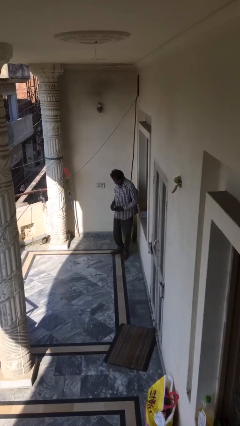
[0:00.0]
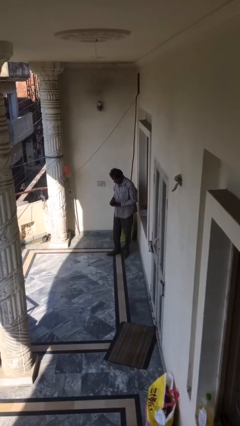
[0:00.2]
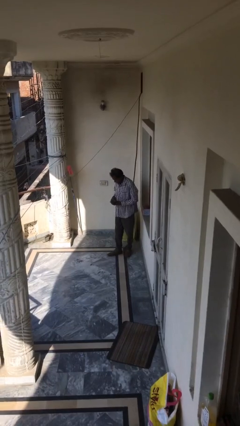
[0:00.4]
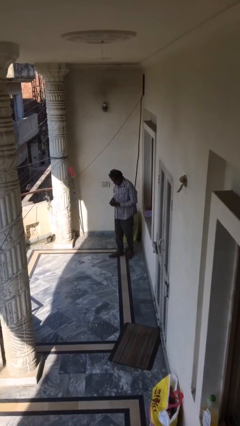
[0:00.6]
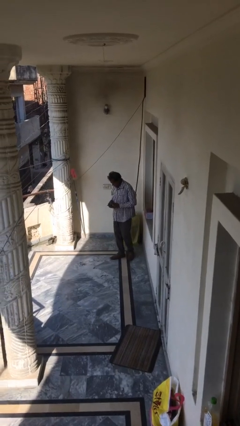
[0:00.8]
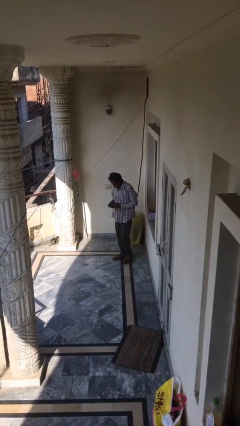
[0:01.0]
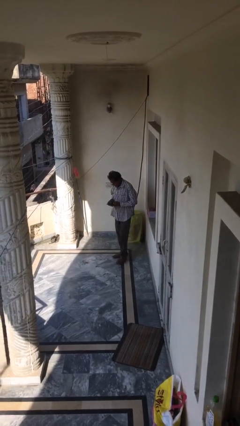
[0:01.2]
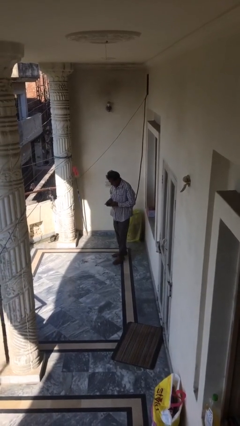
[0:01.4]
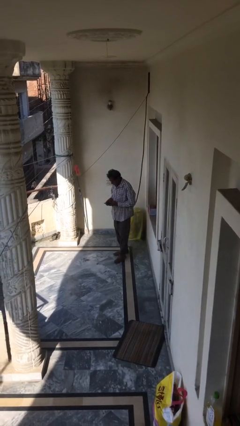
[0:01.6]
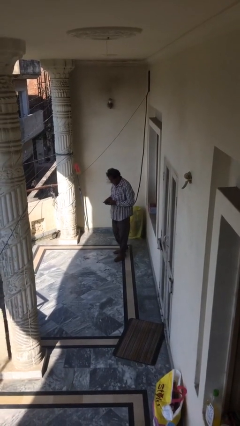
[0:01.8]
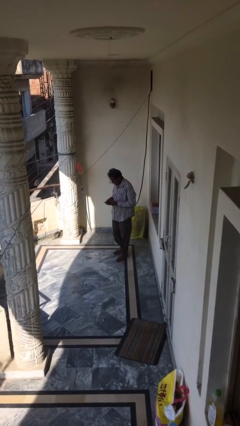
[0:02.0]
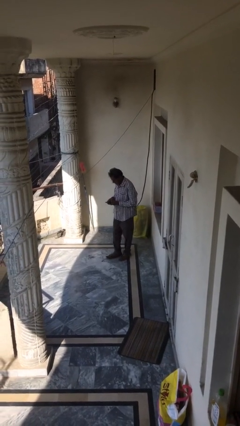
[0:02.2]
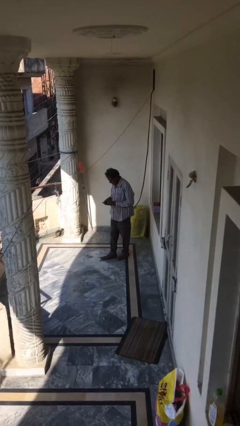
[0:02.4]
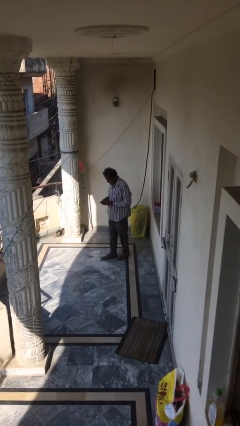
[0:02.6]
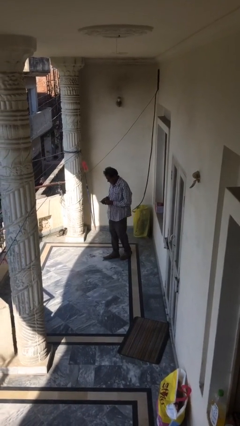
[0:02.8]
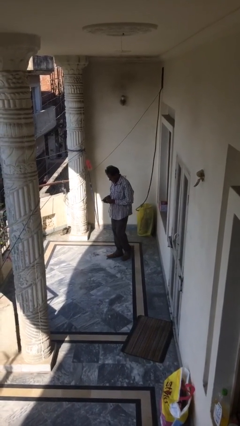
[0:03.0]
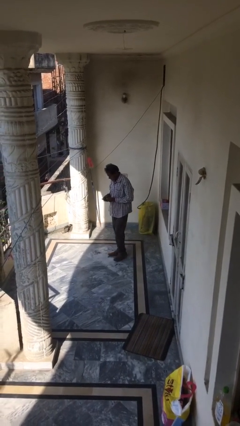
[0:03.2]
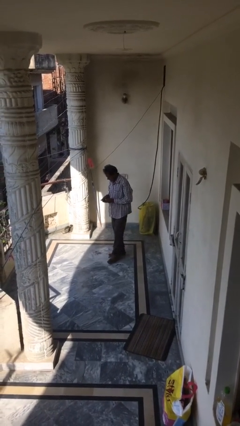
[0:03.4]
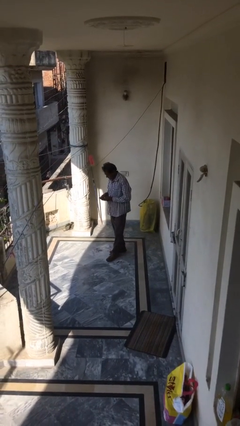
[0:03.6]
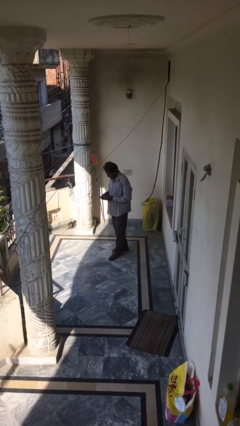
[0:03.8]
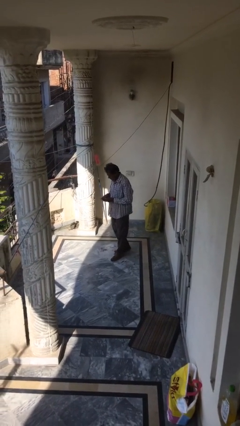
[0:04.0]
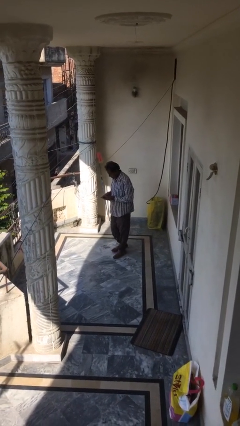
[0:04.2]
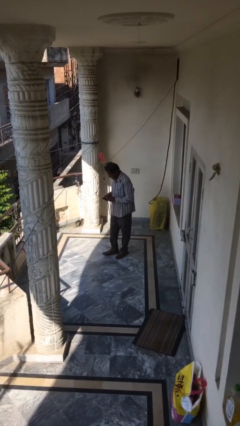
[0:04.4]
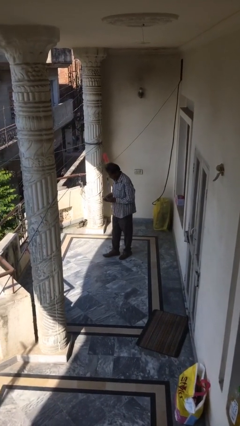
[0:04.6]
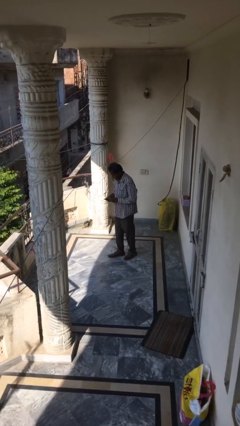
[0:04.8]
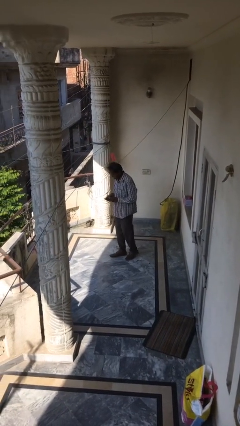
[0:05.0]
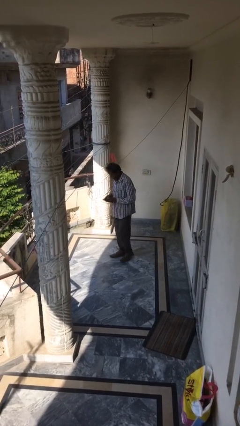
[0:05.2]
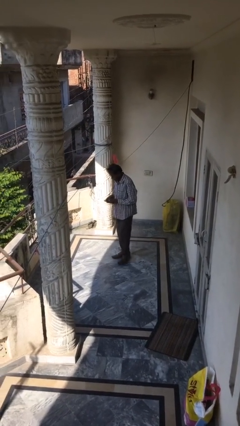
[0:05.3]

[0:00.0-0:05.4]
person texts on phone

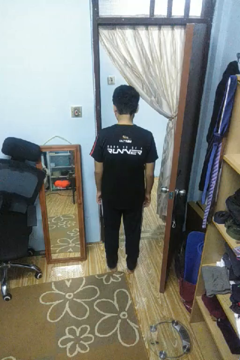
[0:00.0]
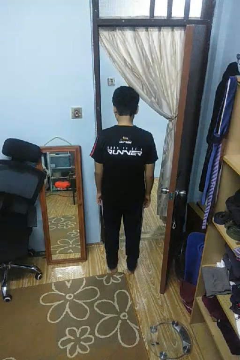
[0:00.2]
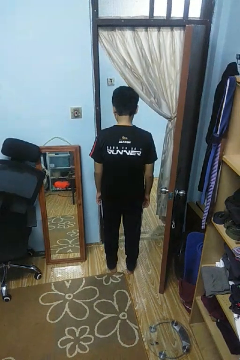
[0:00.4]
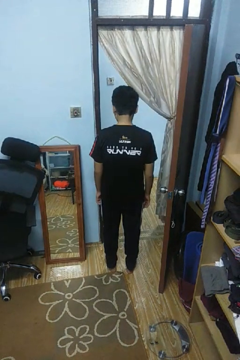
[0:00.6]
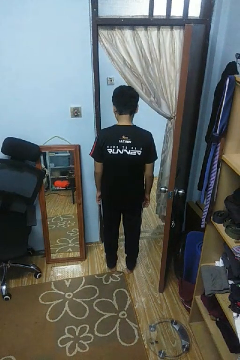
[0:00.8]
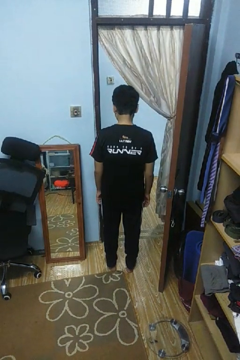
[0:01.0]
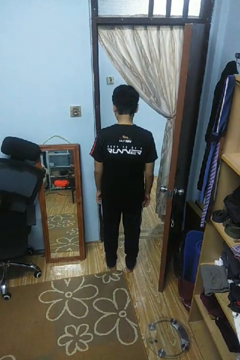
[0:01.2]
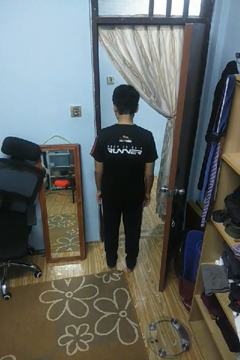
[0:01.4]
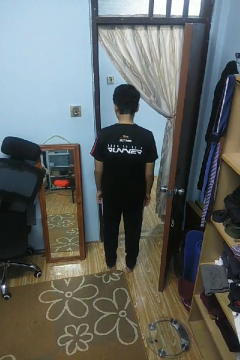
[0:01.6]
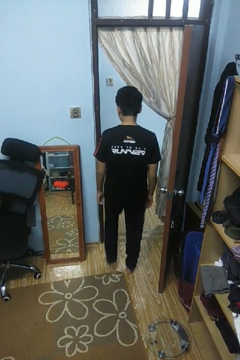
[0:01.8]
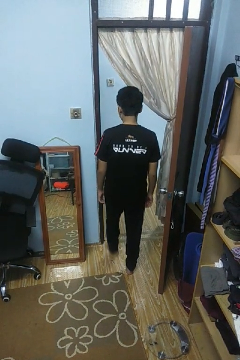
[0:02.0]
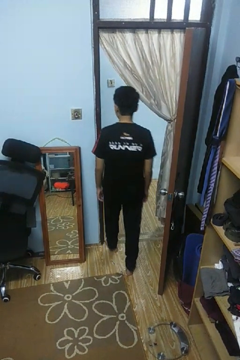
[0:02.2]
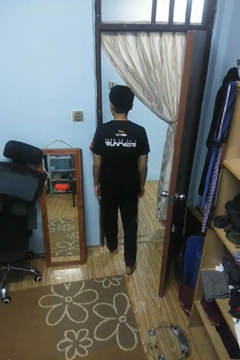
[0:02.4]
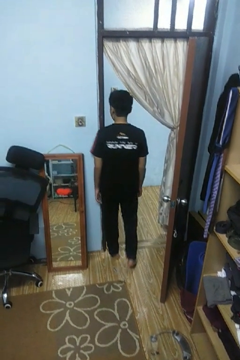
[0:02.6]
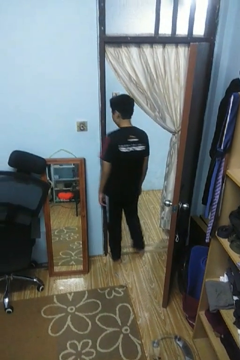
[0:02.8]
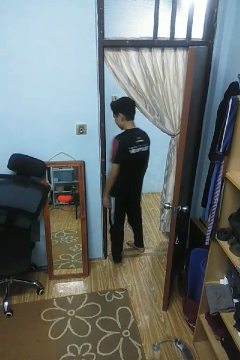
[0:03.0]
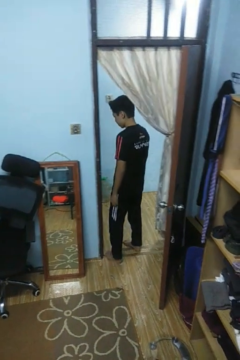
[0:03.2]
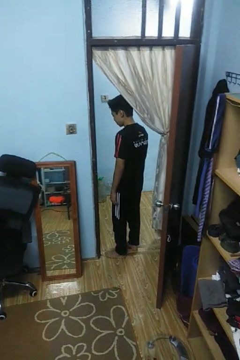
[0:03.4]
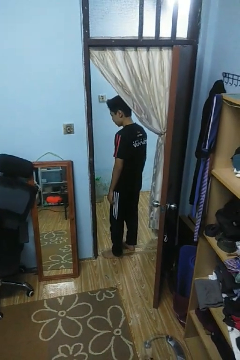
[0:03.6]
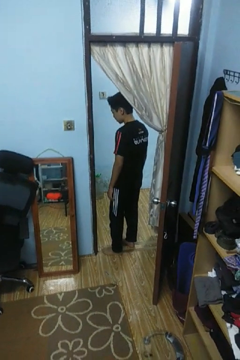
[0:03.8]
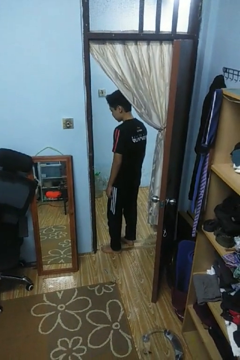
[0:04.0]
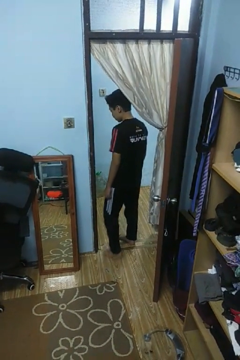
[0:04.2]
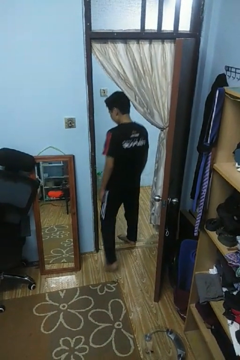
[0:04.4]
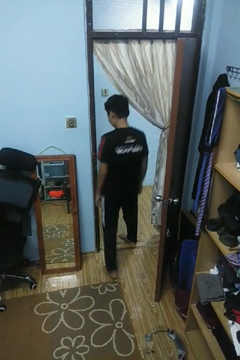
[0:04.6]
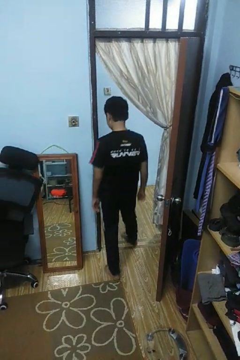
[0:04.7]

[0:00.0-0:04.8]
person bumps into wall

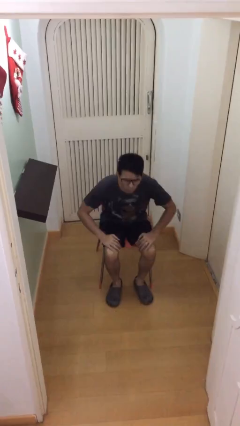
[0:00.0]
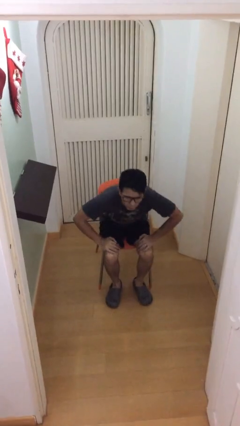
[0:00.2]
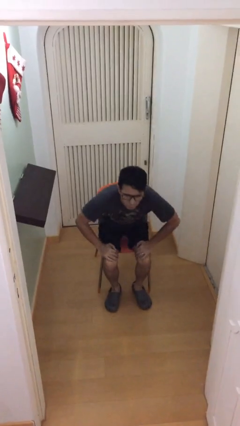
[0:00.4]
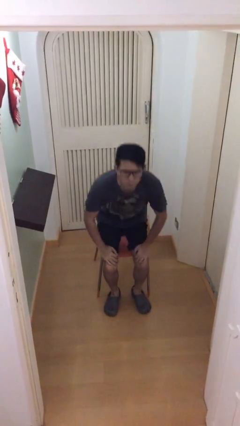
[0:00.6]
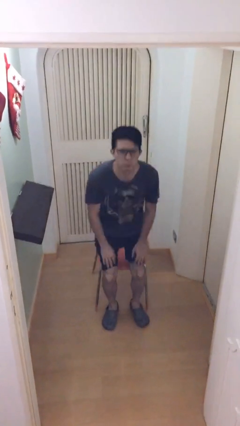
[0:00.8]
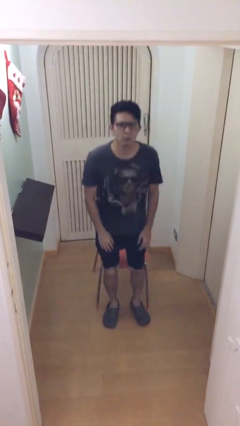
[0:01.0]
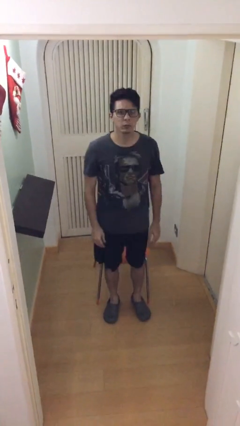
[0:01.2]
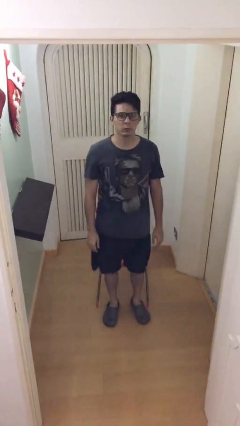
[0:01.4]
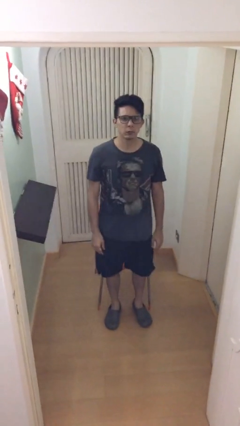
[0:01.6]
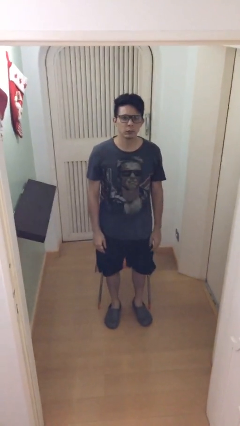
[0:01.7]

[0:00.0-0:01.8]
person stands up

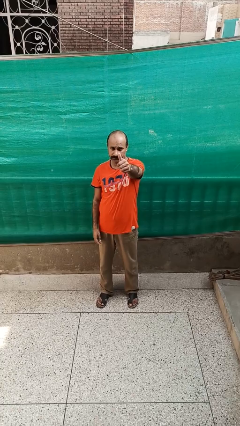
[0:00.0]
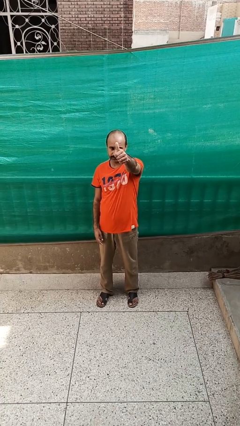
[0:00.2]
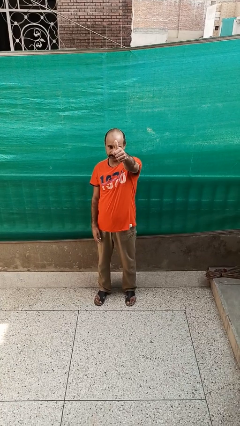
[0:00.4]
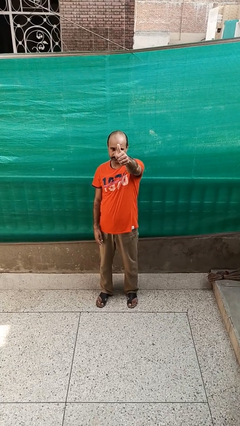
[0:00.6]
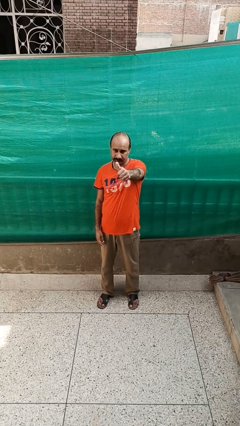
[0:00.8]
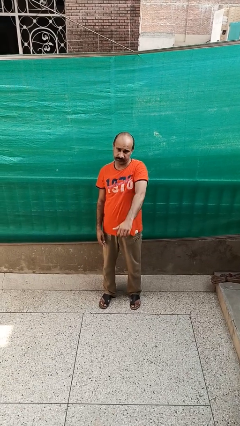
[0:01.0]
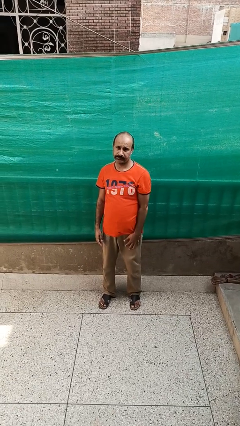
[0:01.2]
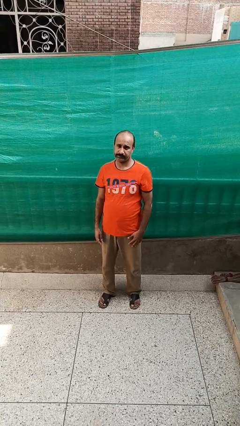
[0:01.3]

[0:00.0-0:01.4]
person gestures thumbs up

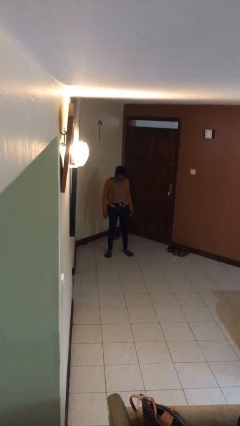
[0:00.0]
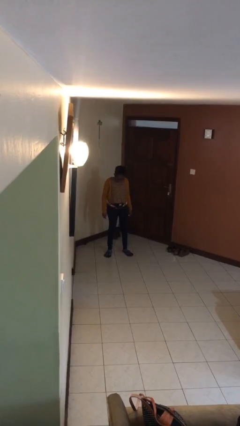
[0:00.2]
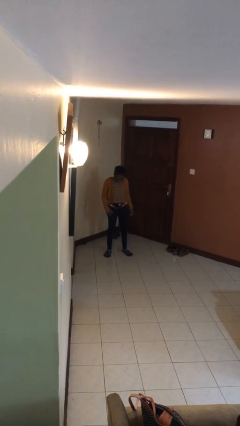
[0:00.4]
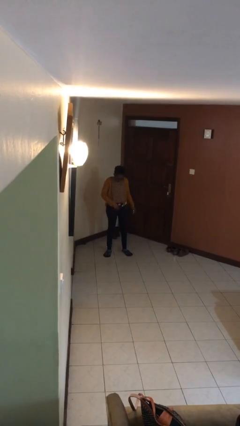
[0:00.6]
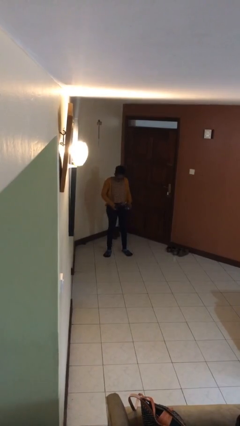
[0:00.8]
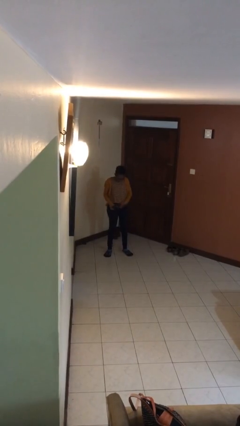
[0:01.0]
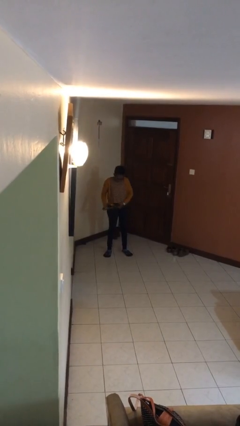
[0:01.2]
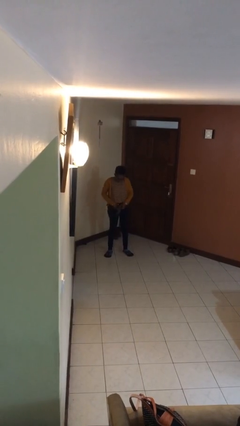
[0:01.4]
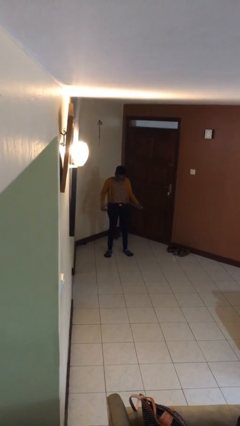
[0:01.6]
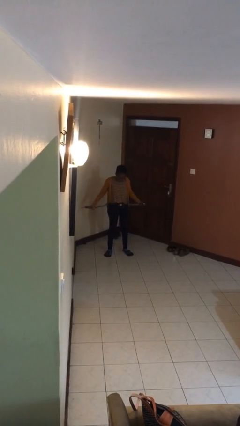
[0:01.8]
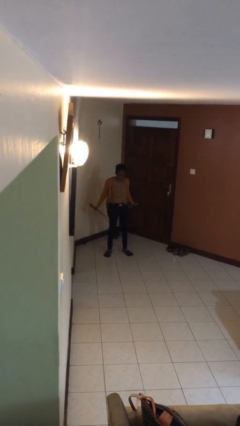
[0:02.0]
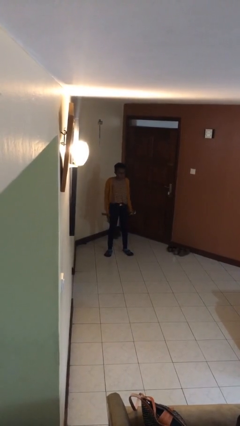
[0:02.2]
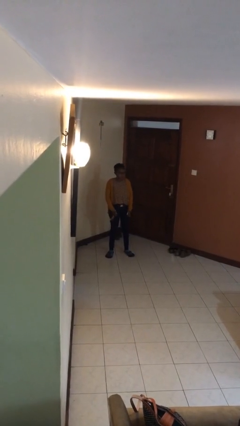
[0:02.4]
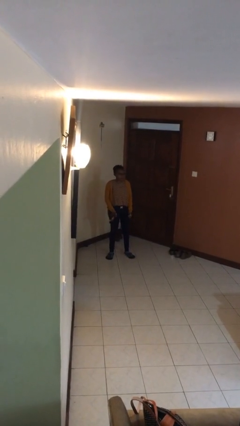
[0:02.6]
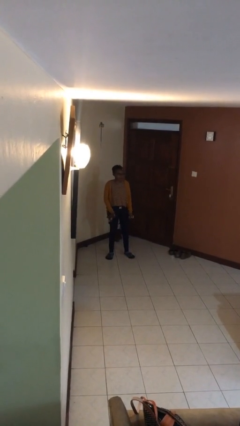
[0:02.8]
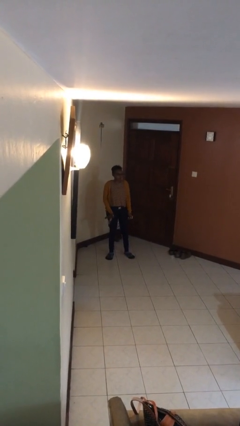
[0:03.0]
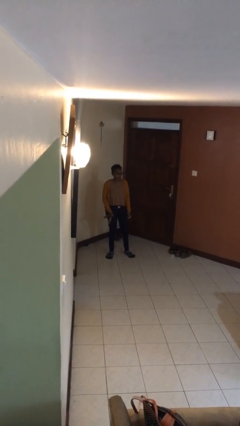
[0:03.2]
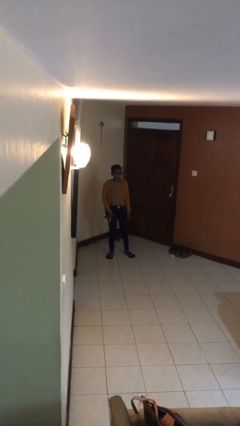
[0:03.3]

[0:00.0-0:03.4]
person takes off belt

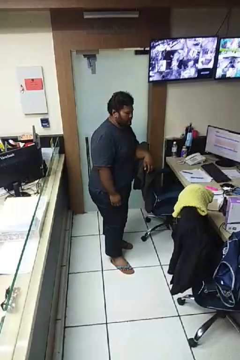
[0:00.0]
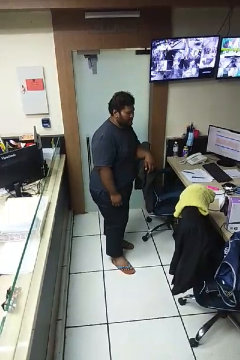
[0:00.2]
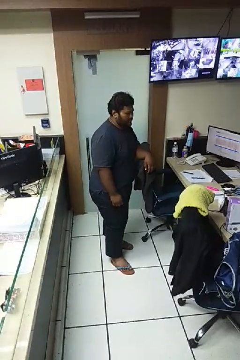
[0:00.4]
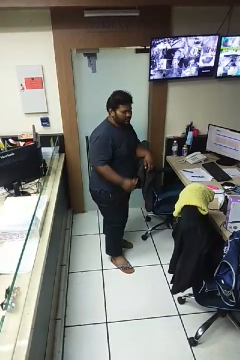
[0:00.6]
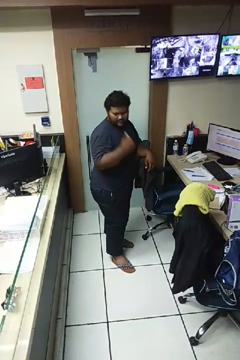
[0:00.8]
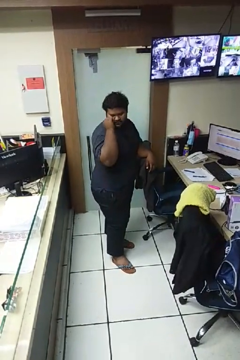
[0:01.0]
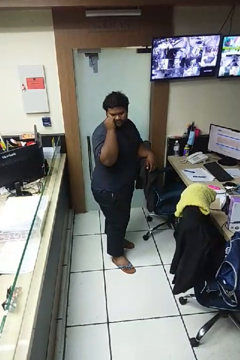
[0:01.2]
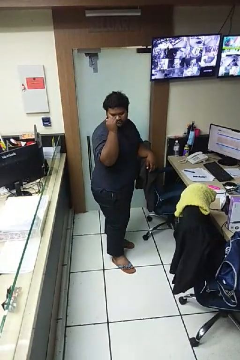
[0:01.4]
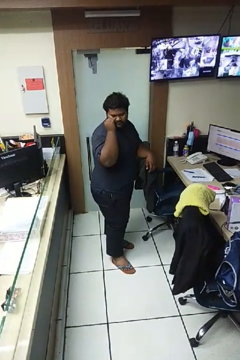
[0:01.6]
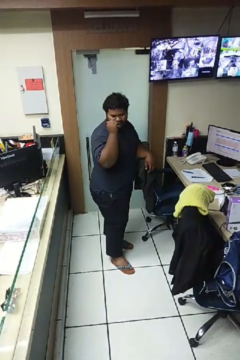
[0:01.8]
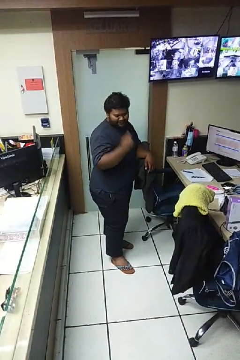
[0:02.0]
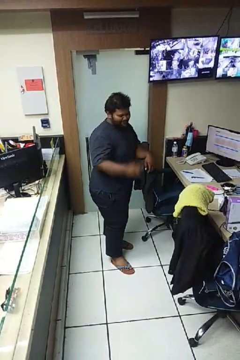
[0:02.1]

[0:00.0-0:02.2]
person gestures behind me
